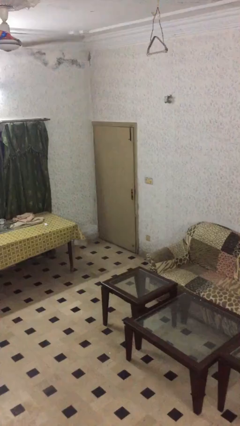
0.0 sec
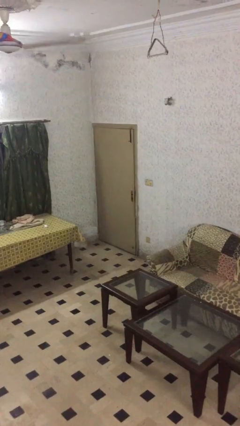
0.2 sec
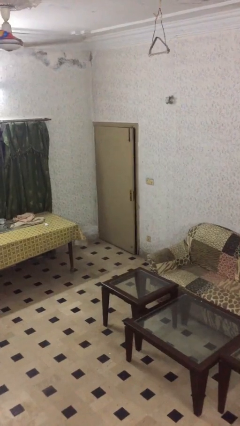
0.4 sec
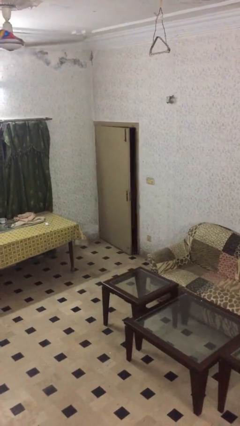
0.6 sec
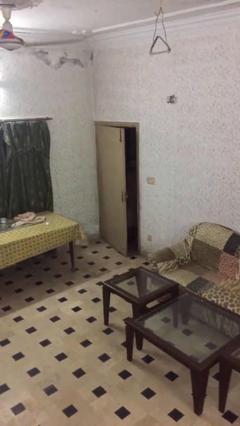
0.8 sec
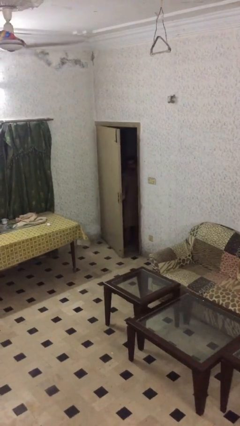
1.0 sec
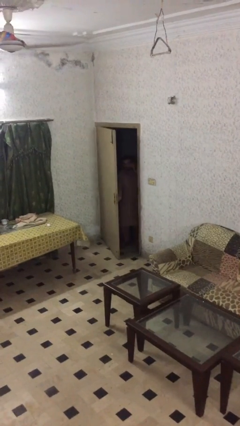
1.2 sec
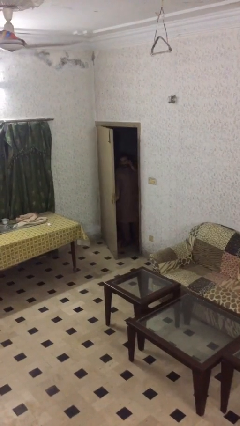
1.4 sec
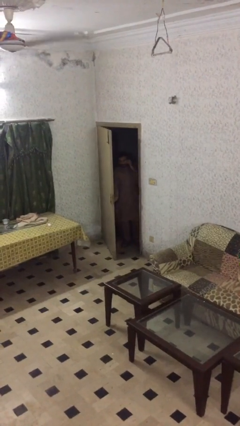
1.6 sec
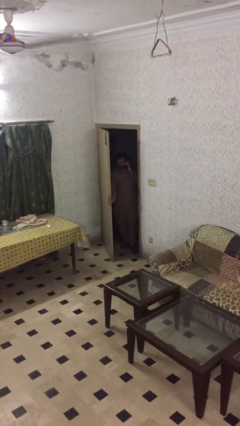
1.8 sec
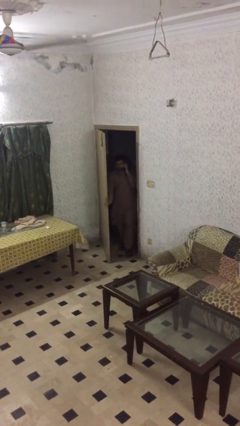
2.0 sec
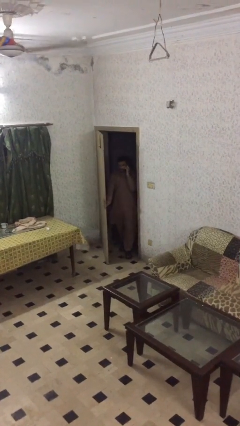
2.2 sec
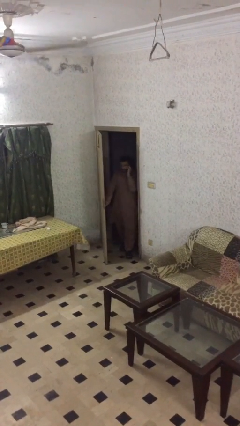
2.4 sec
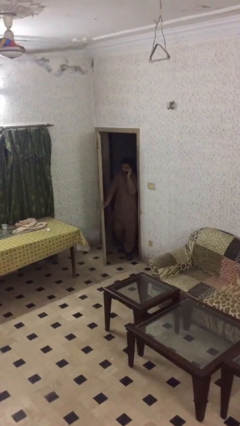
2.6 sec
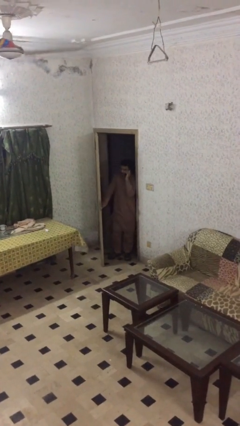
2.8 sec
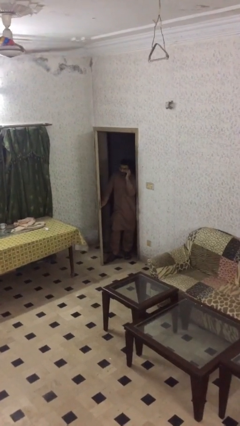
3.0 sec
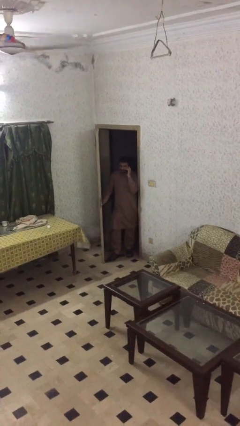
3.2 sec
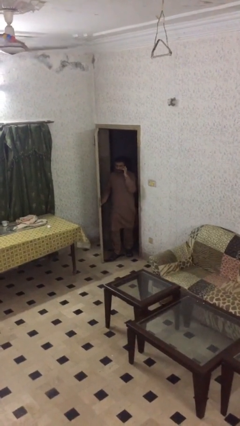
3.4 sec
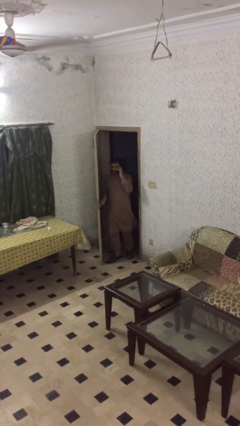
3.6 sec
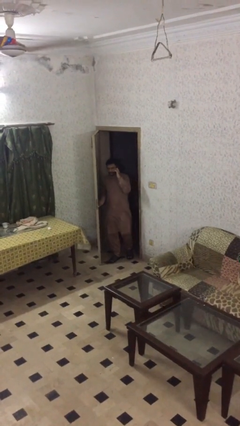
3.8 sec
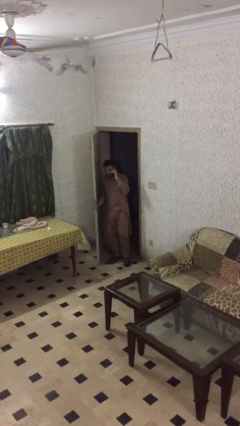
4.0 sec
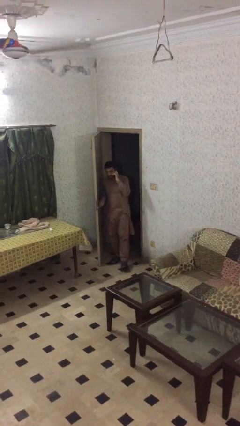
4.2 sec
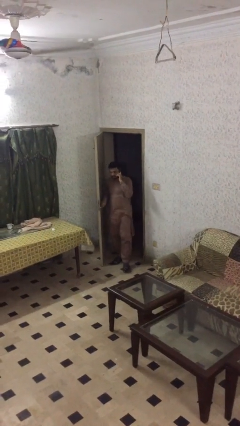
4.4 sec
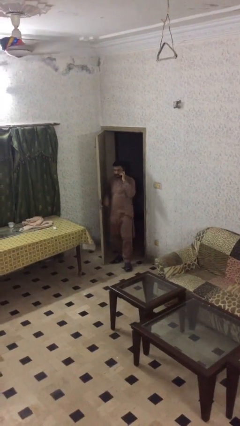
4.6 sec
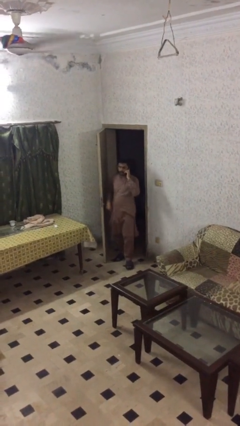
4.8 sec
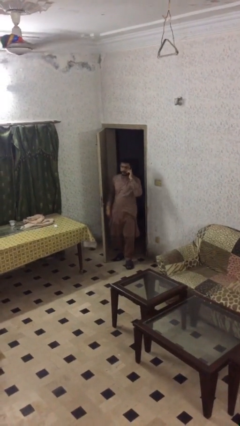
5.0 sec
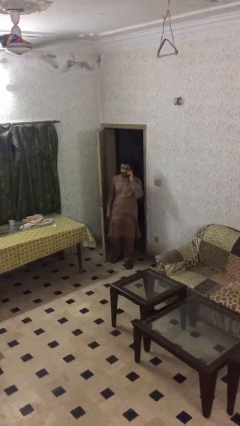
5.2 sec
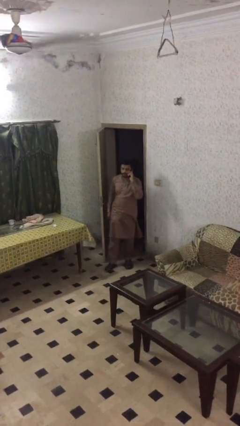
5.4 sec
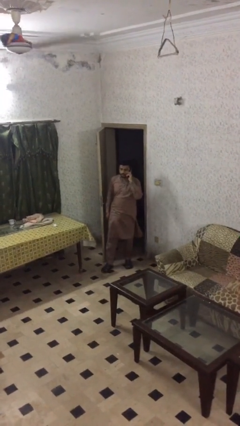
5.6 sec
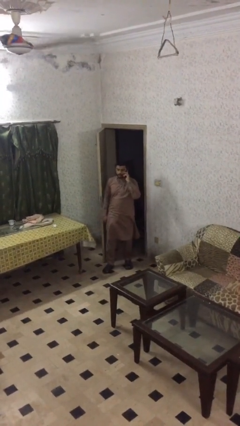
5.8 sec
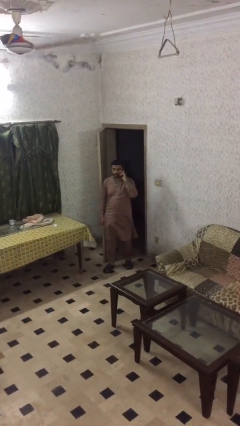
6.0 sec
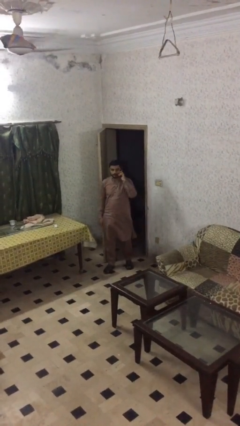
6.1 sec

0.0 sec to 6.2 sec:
person enters scene through structure

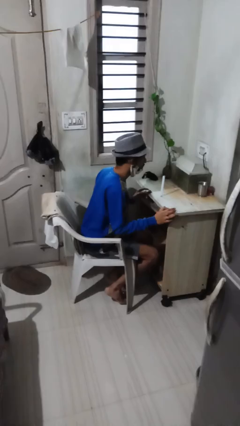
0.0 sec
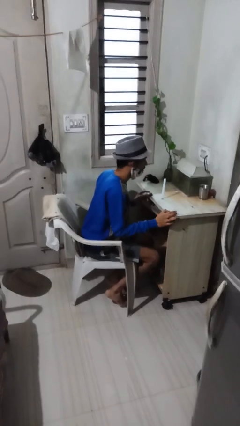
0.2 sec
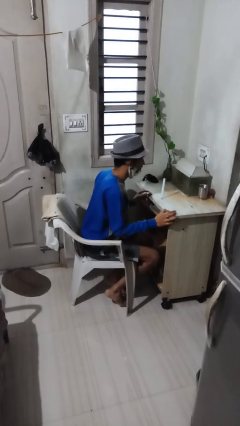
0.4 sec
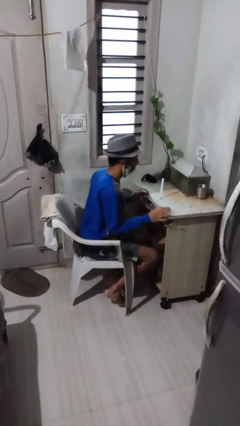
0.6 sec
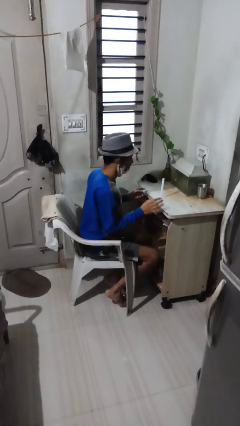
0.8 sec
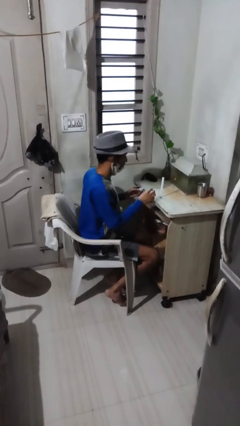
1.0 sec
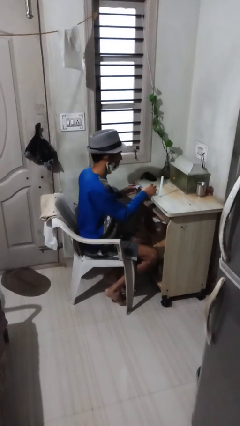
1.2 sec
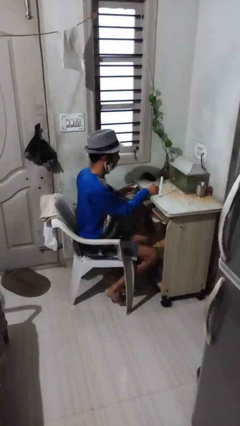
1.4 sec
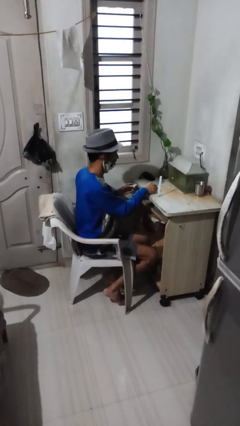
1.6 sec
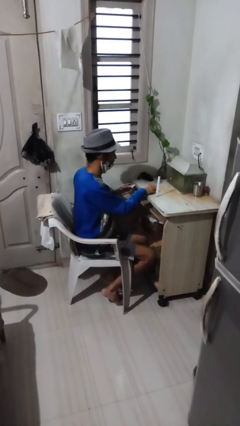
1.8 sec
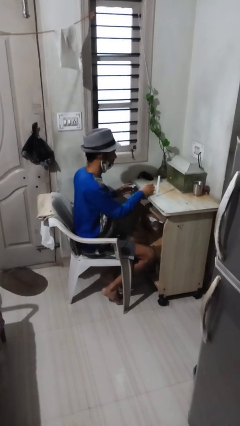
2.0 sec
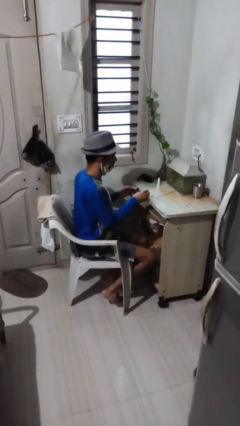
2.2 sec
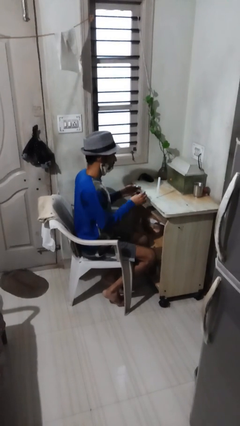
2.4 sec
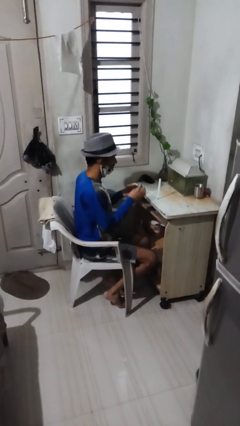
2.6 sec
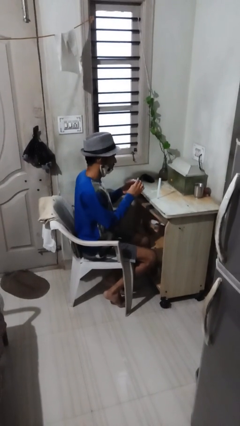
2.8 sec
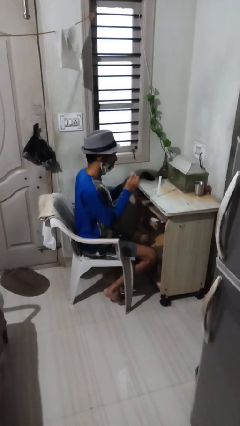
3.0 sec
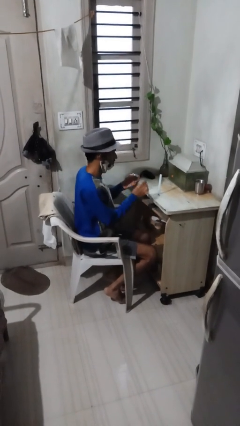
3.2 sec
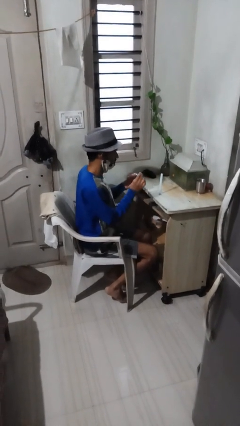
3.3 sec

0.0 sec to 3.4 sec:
person extinguishes candle

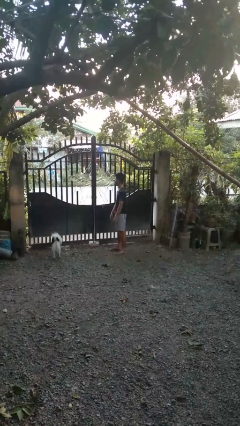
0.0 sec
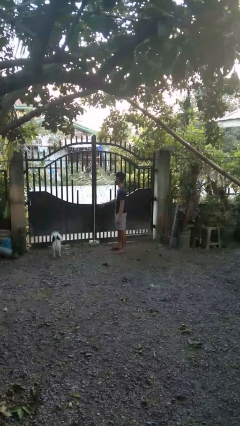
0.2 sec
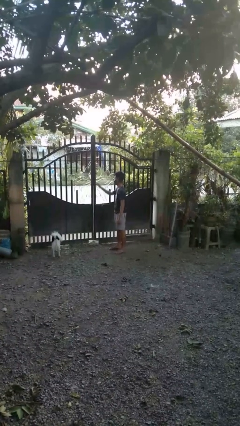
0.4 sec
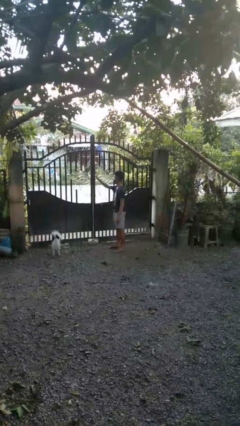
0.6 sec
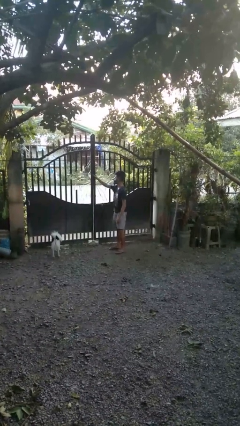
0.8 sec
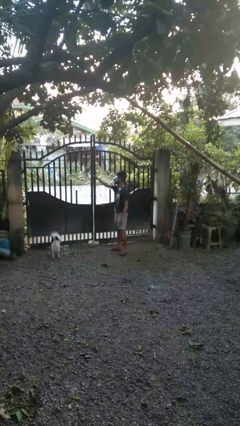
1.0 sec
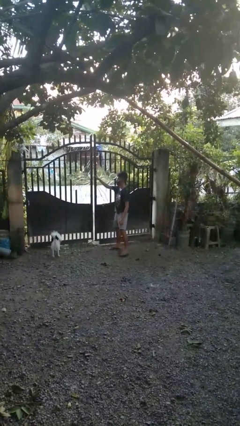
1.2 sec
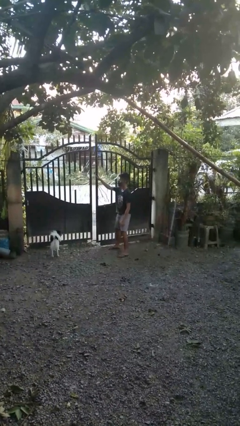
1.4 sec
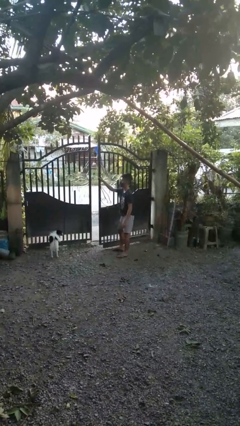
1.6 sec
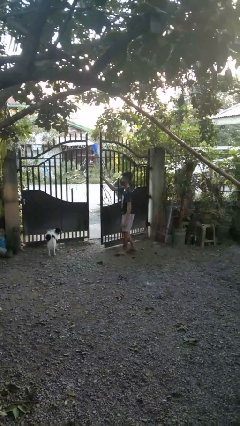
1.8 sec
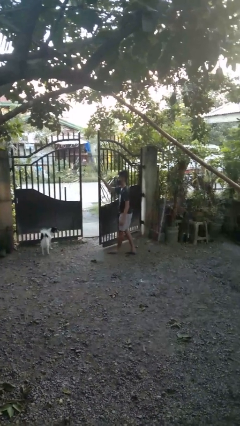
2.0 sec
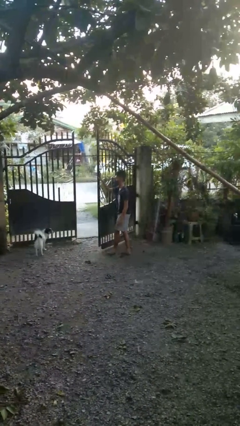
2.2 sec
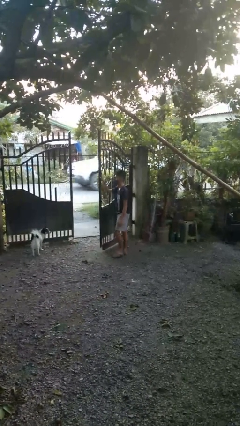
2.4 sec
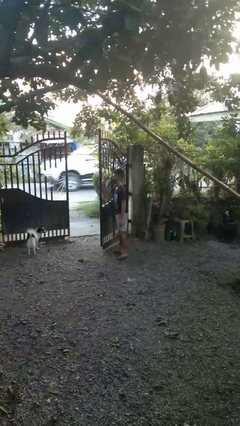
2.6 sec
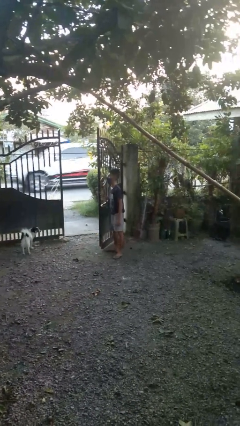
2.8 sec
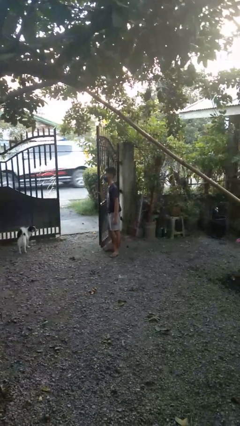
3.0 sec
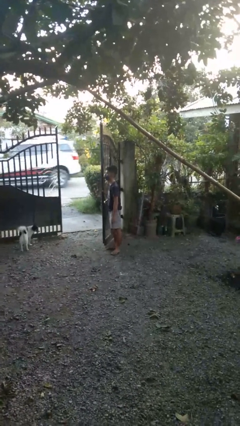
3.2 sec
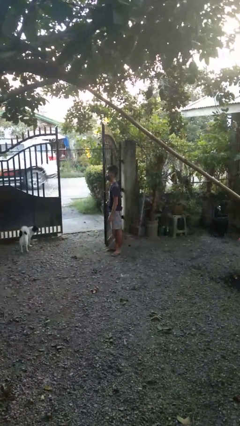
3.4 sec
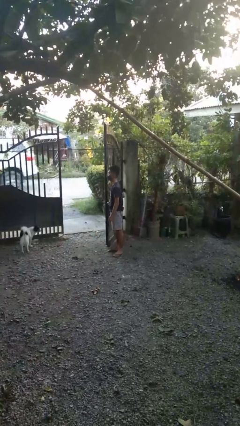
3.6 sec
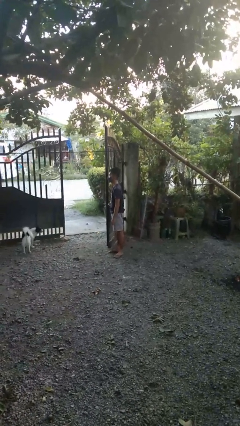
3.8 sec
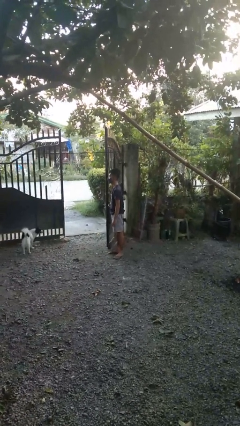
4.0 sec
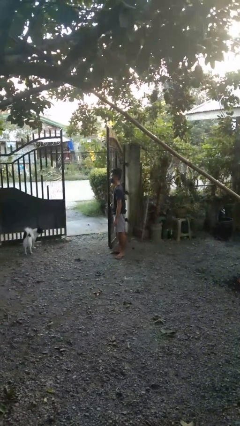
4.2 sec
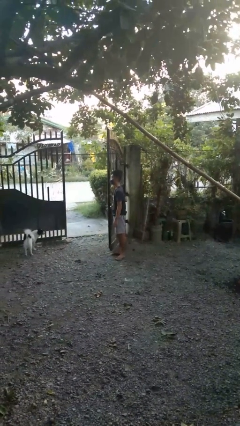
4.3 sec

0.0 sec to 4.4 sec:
person opens gate

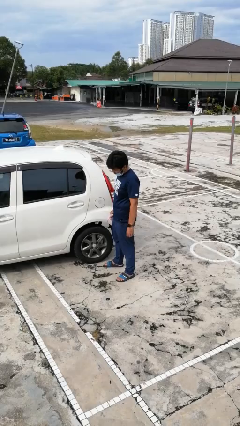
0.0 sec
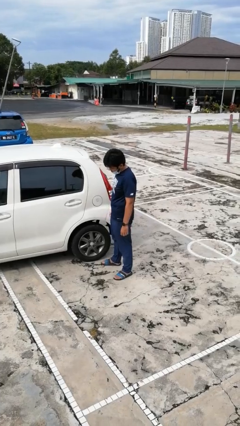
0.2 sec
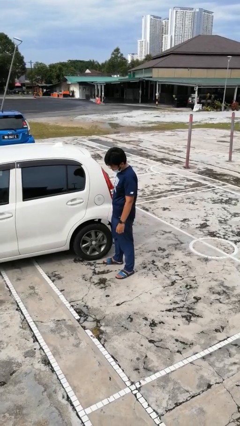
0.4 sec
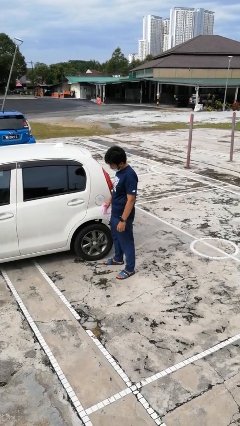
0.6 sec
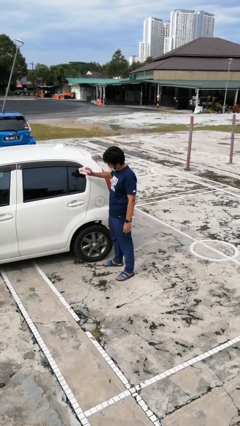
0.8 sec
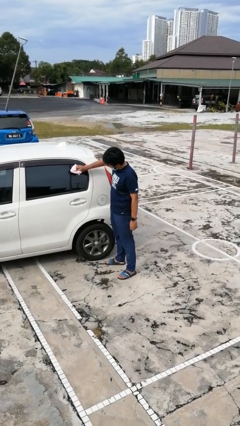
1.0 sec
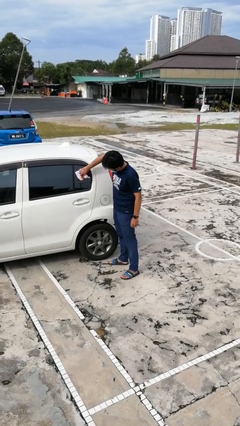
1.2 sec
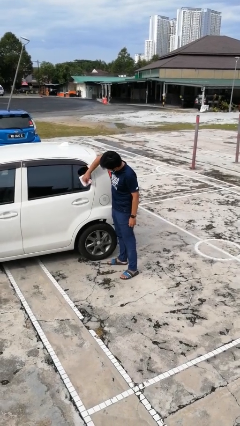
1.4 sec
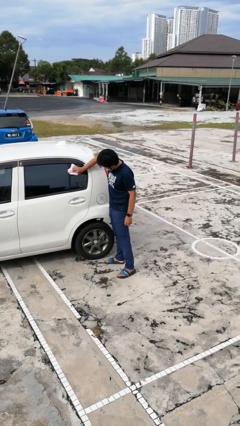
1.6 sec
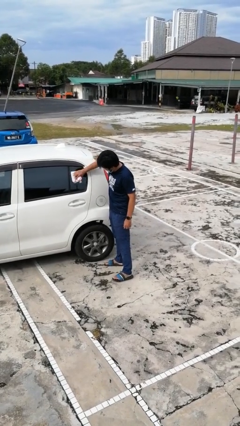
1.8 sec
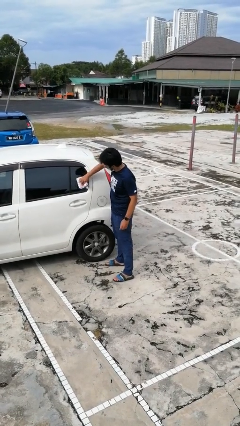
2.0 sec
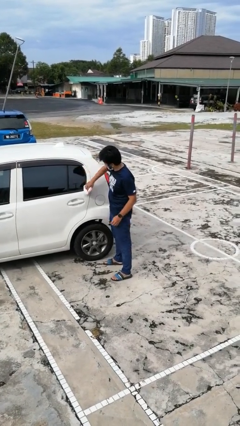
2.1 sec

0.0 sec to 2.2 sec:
person polishes car with rag

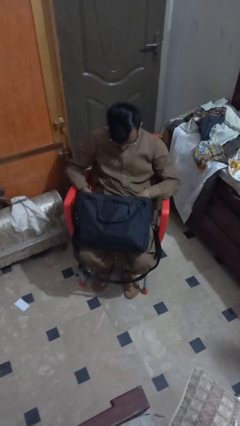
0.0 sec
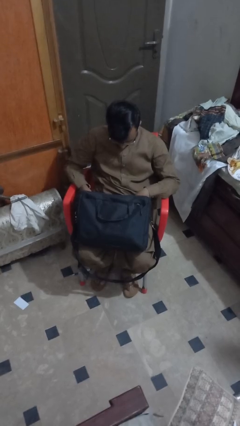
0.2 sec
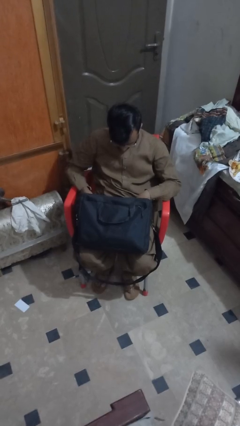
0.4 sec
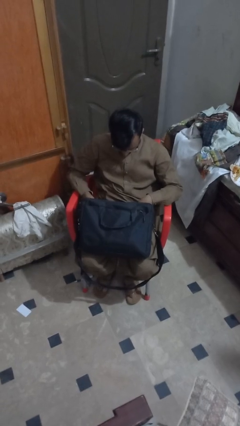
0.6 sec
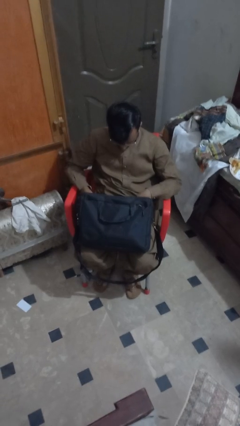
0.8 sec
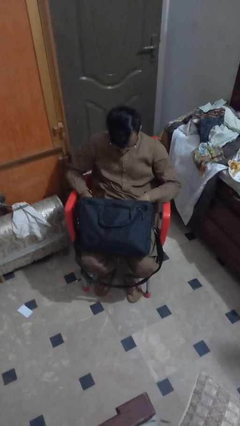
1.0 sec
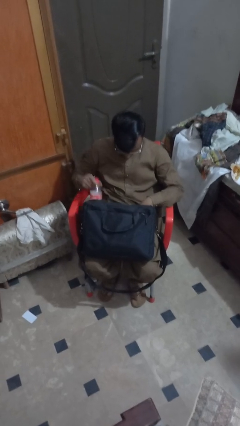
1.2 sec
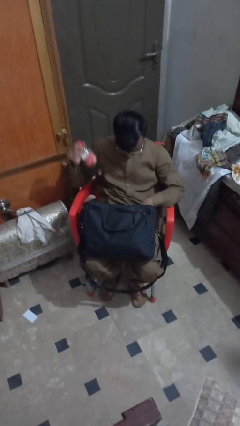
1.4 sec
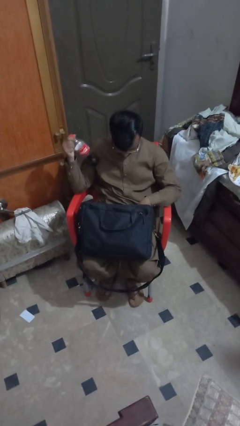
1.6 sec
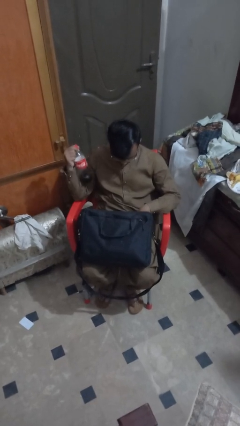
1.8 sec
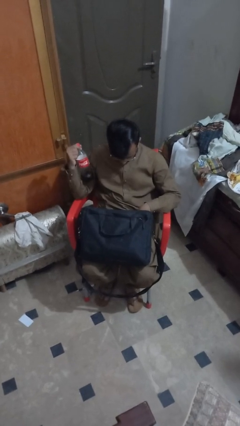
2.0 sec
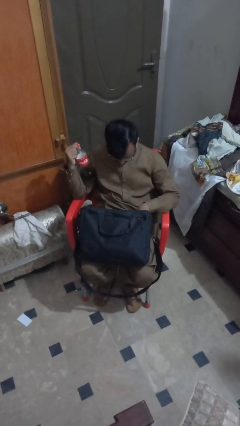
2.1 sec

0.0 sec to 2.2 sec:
person takes object from bag
